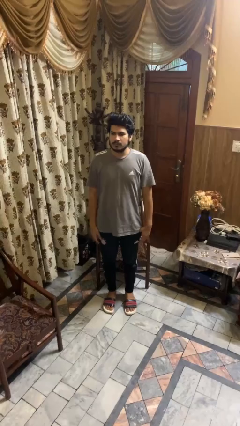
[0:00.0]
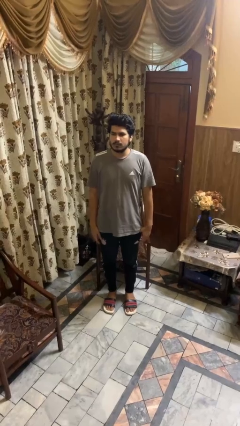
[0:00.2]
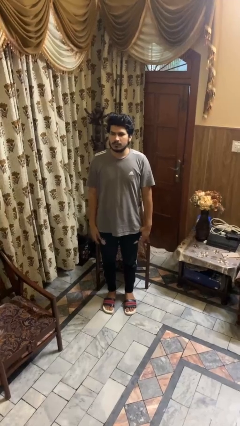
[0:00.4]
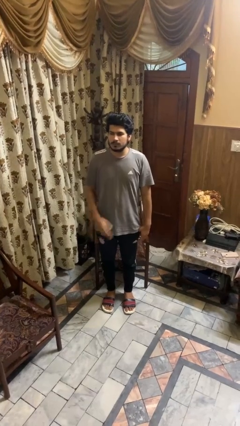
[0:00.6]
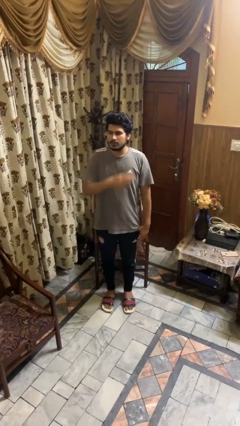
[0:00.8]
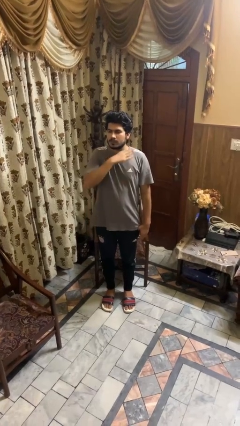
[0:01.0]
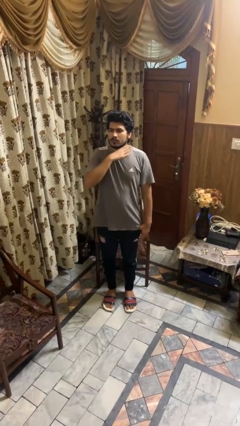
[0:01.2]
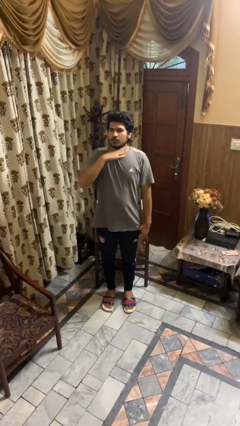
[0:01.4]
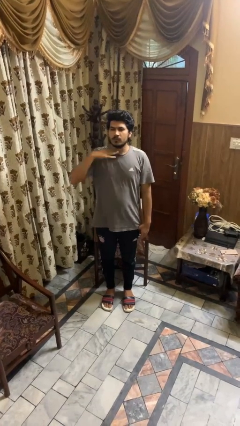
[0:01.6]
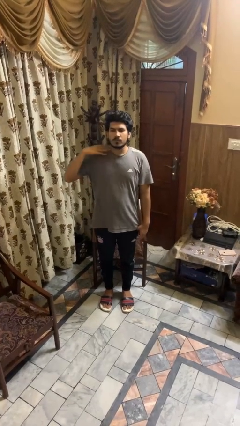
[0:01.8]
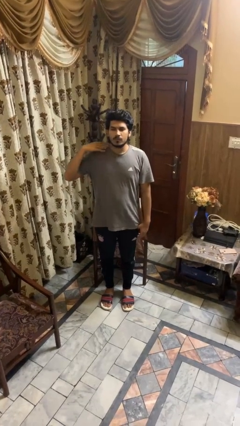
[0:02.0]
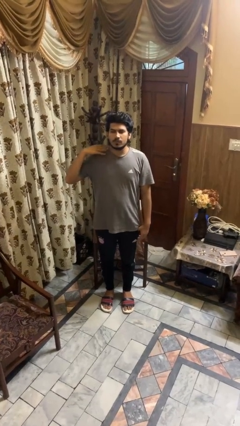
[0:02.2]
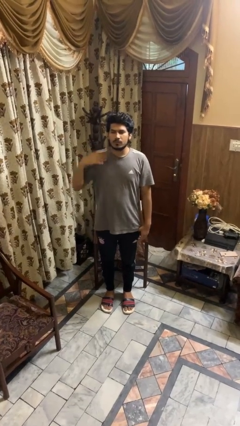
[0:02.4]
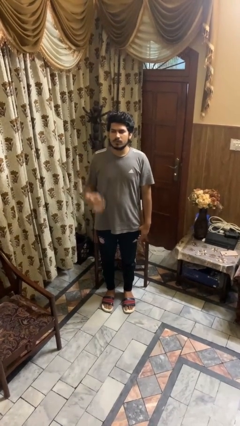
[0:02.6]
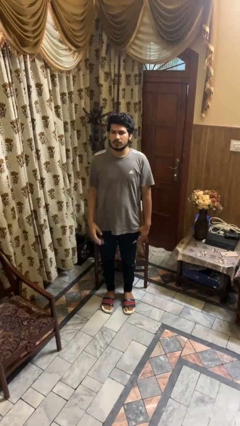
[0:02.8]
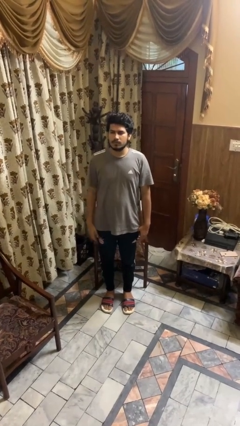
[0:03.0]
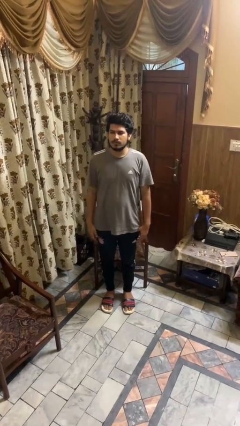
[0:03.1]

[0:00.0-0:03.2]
person gestures cut

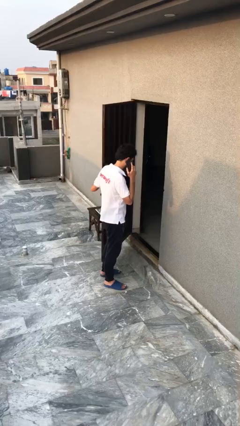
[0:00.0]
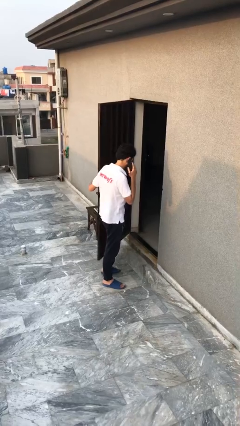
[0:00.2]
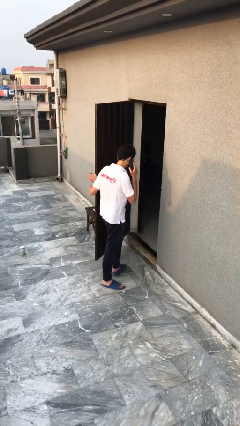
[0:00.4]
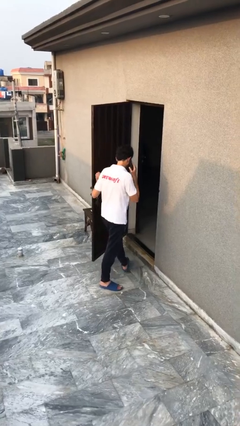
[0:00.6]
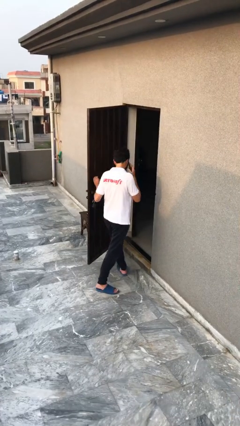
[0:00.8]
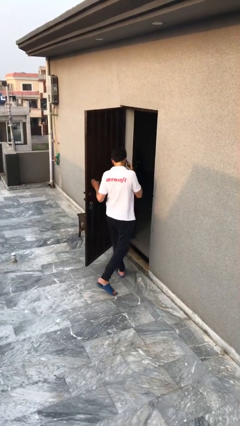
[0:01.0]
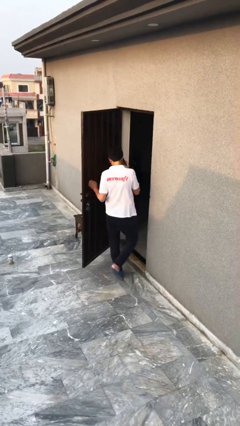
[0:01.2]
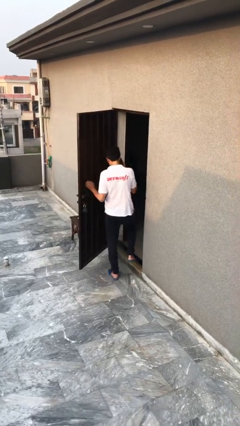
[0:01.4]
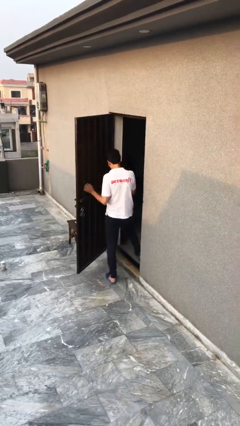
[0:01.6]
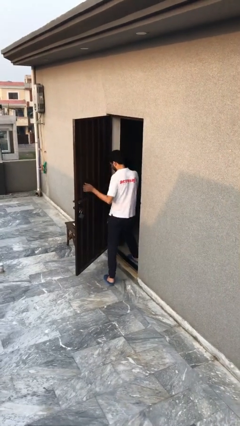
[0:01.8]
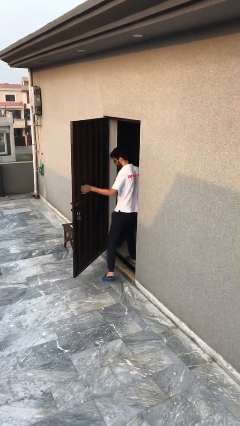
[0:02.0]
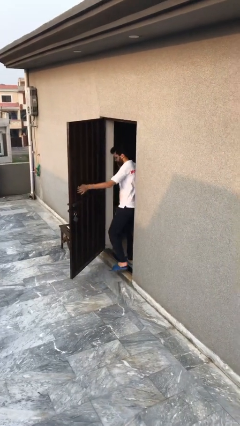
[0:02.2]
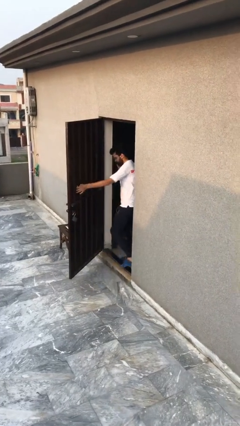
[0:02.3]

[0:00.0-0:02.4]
person exits scene through structure

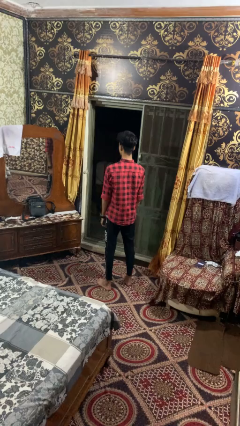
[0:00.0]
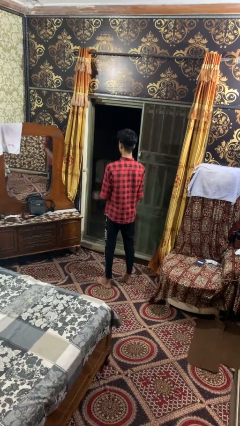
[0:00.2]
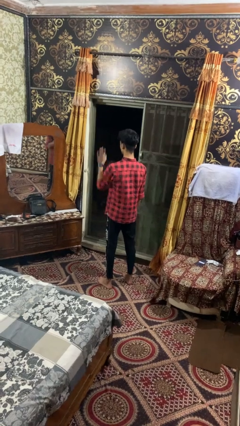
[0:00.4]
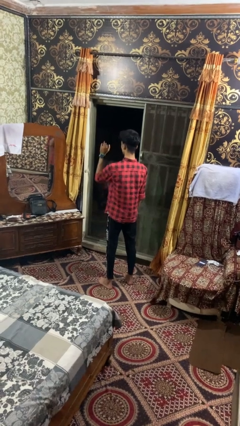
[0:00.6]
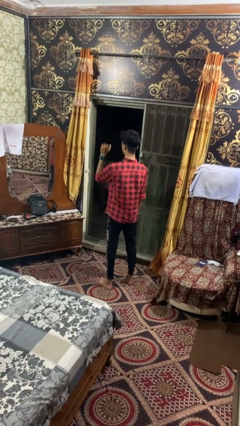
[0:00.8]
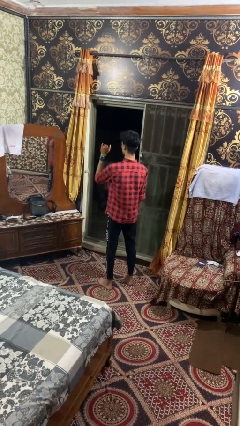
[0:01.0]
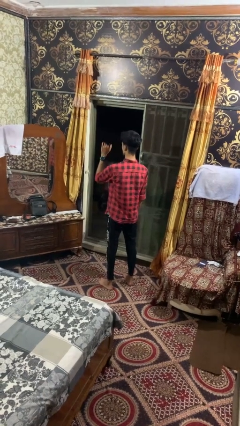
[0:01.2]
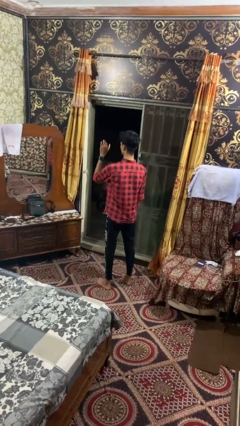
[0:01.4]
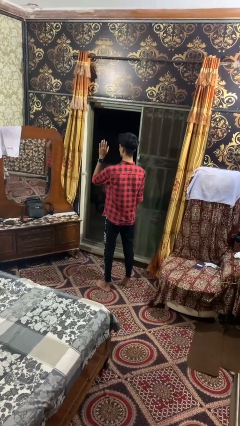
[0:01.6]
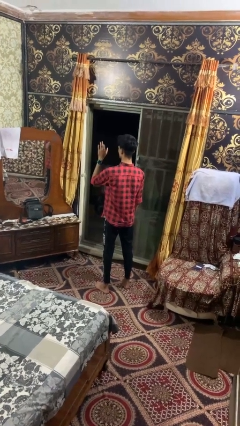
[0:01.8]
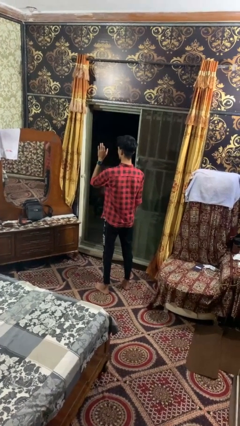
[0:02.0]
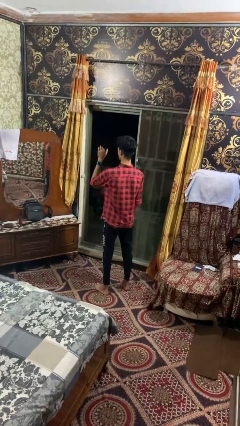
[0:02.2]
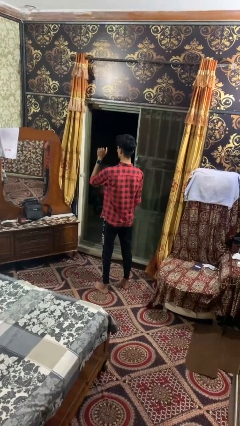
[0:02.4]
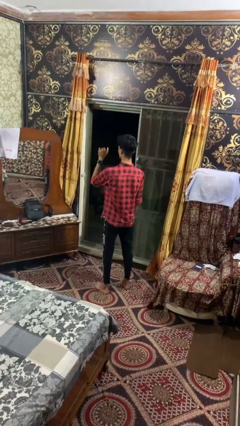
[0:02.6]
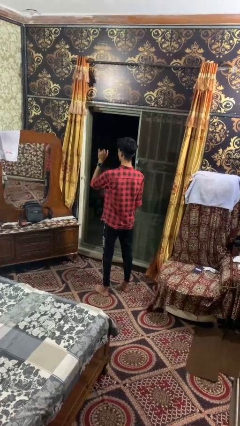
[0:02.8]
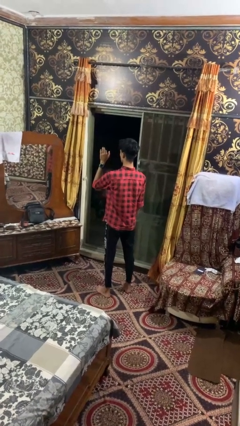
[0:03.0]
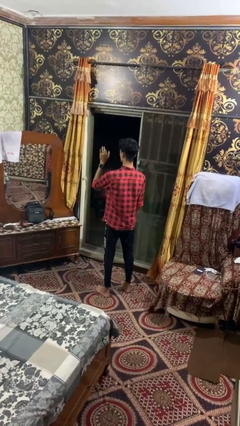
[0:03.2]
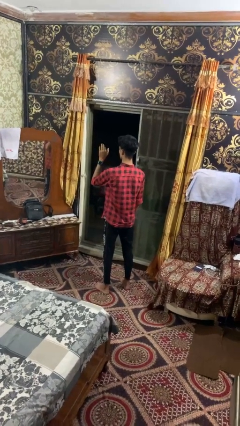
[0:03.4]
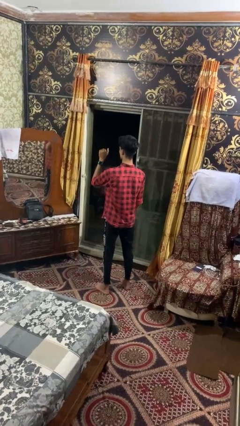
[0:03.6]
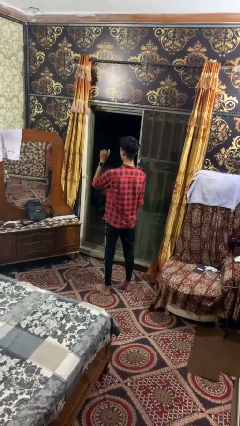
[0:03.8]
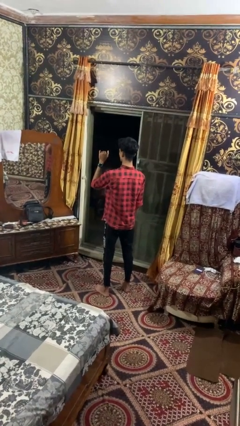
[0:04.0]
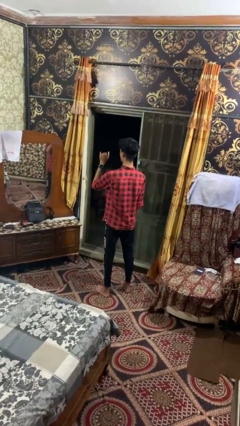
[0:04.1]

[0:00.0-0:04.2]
person gestures come here

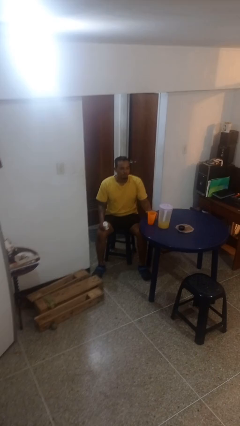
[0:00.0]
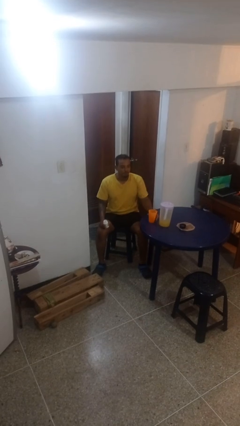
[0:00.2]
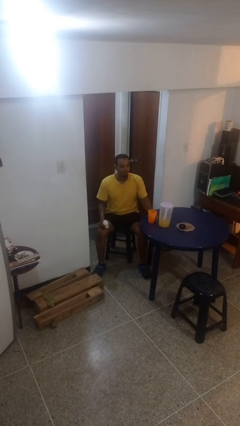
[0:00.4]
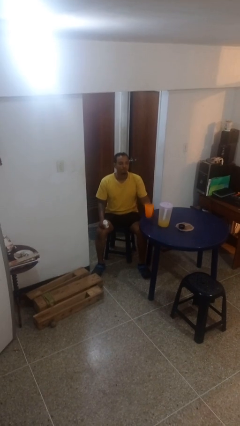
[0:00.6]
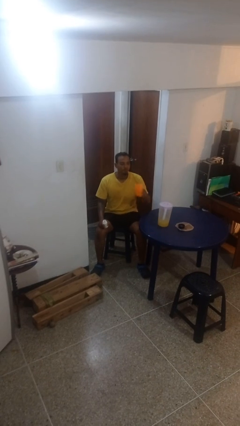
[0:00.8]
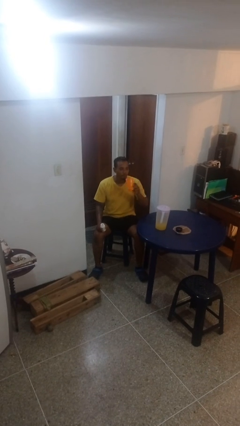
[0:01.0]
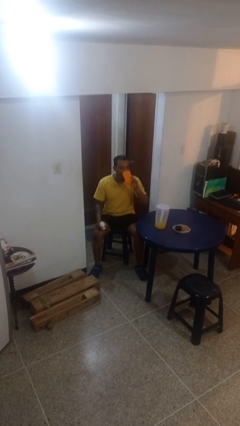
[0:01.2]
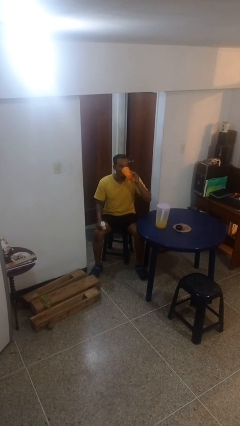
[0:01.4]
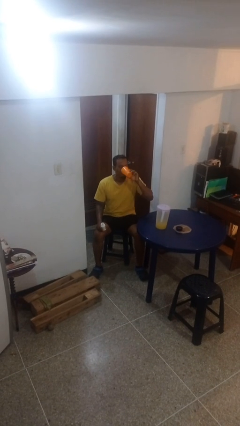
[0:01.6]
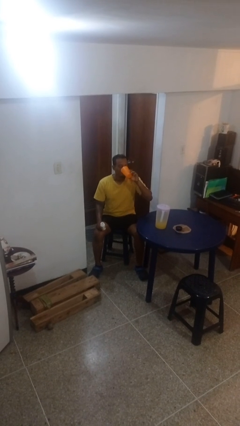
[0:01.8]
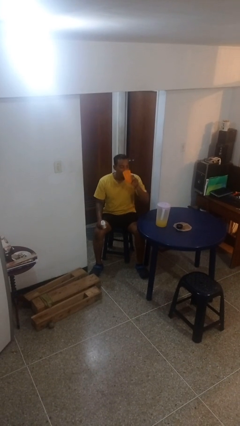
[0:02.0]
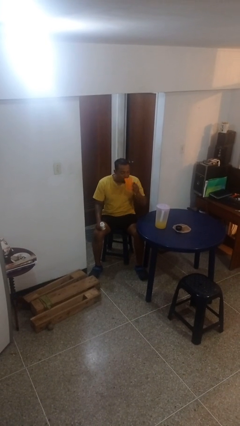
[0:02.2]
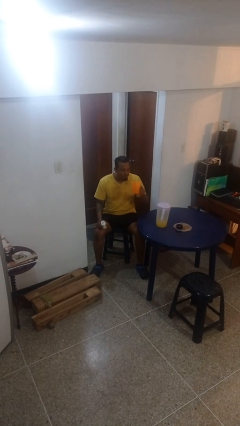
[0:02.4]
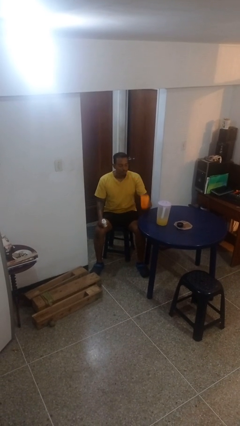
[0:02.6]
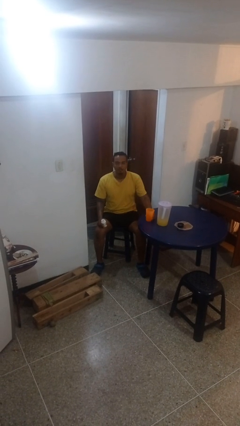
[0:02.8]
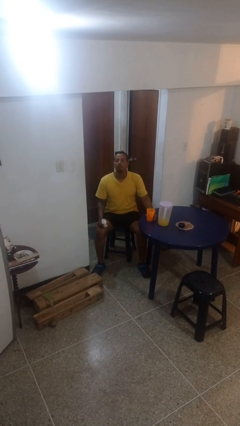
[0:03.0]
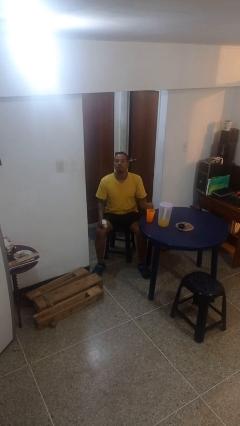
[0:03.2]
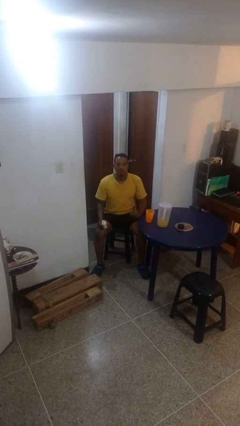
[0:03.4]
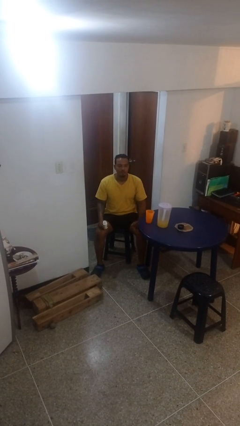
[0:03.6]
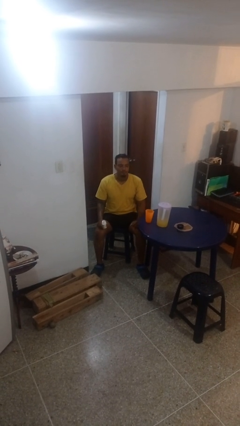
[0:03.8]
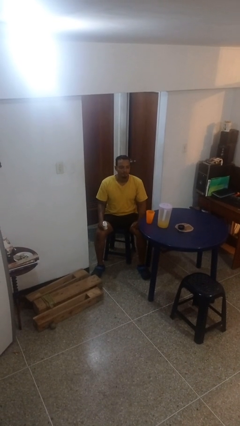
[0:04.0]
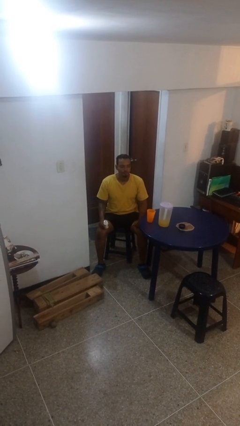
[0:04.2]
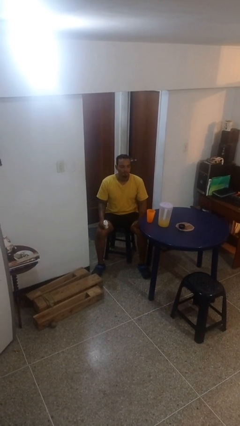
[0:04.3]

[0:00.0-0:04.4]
person drinks from cup

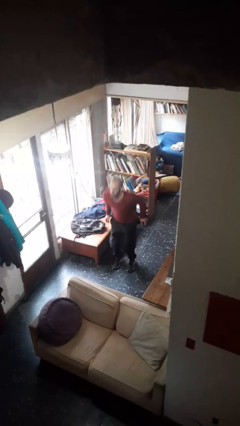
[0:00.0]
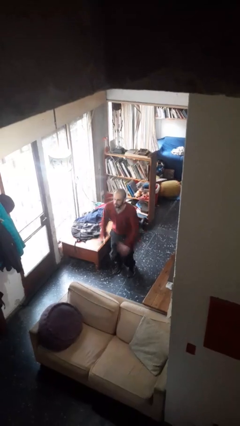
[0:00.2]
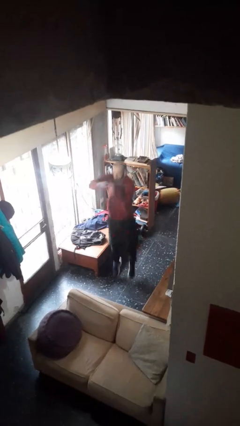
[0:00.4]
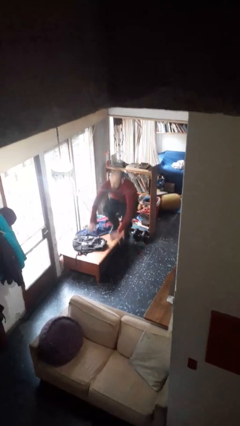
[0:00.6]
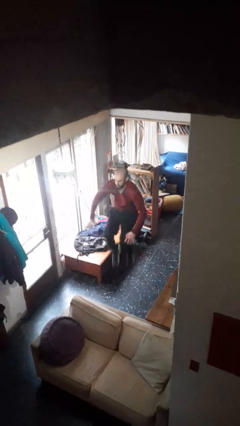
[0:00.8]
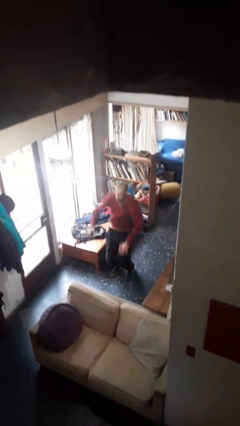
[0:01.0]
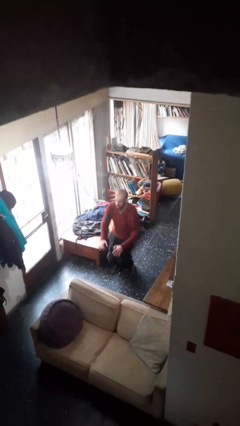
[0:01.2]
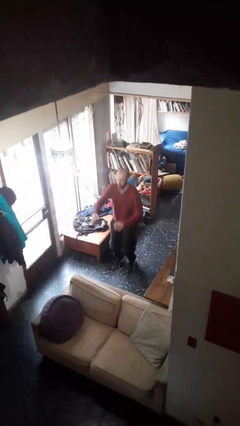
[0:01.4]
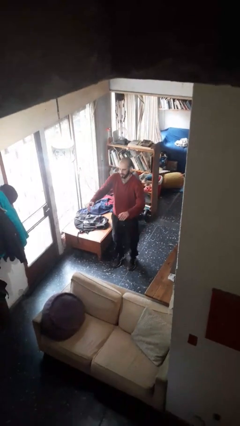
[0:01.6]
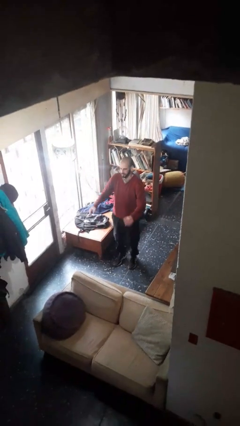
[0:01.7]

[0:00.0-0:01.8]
person jumps

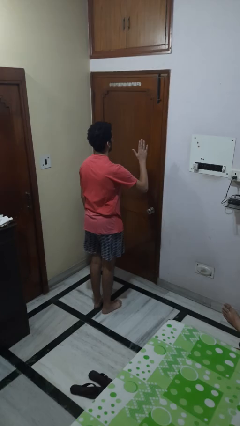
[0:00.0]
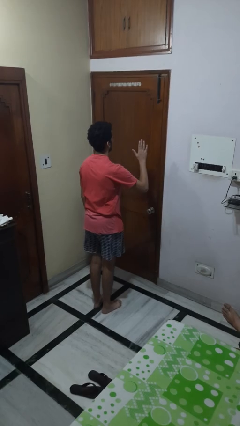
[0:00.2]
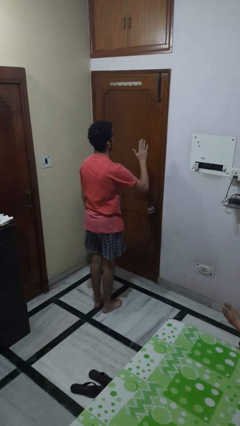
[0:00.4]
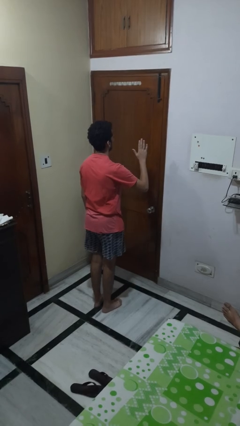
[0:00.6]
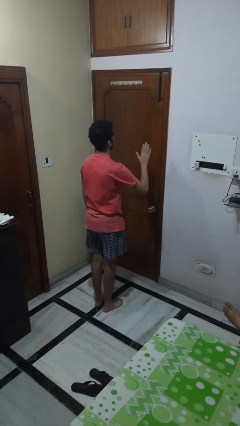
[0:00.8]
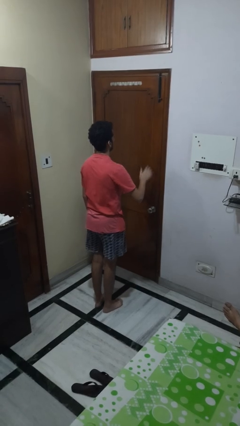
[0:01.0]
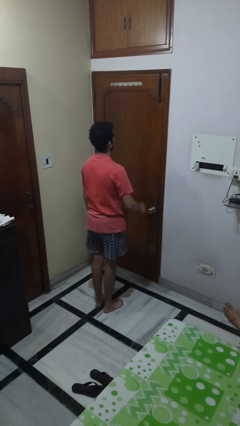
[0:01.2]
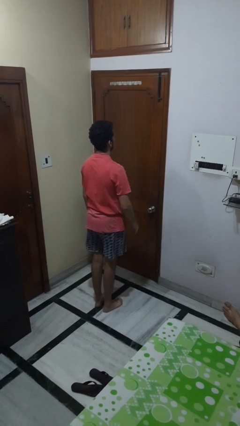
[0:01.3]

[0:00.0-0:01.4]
person gestures stop
